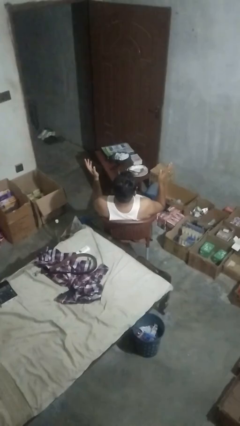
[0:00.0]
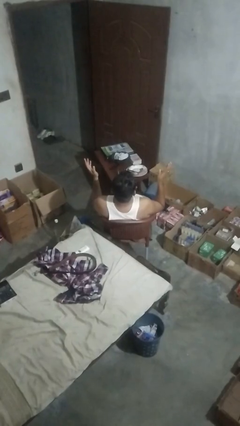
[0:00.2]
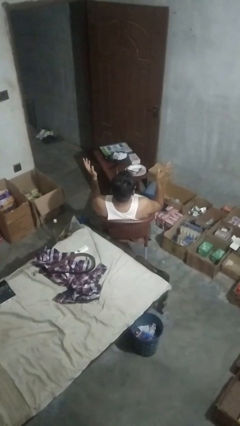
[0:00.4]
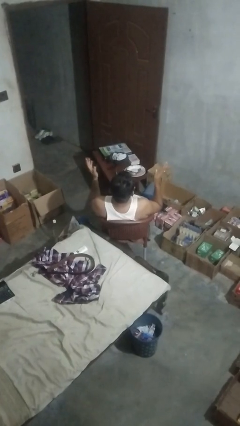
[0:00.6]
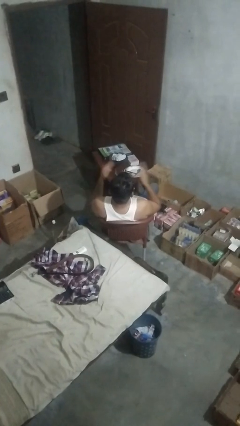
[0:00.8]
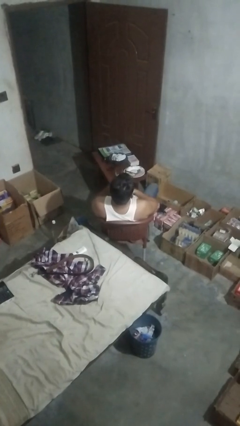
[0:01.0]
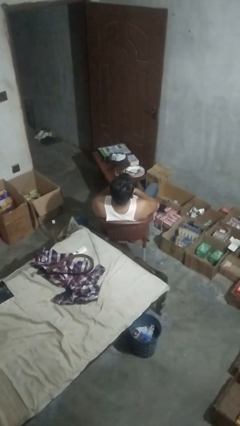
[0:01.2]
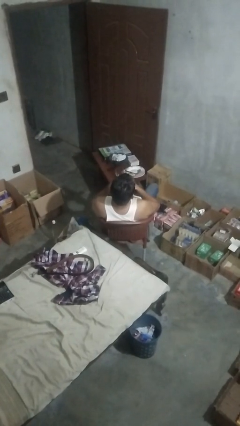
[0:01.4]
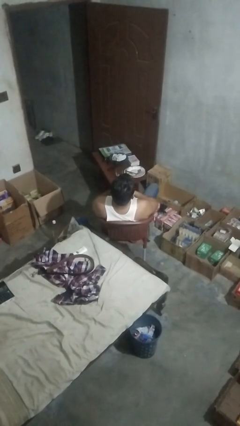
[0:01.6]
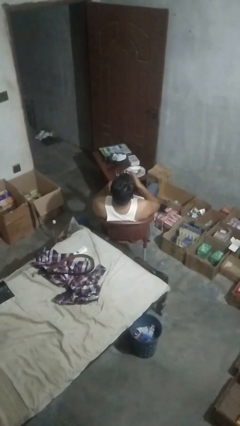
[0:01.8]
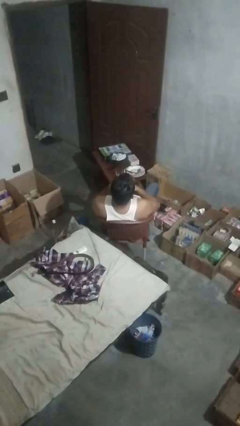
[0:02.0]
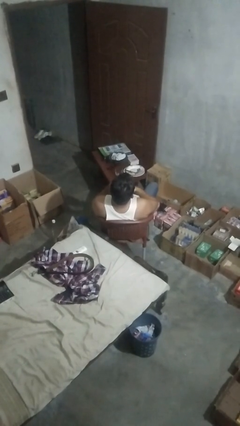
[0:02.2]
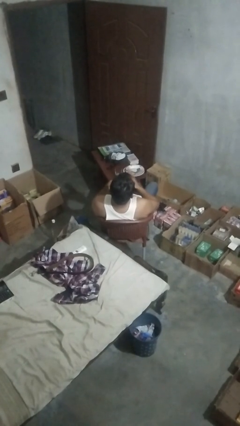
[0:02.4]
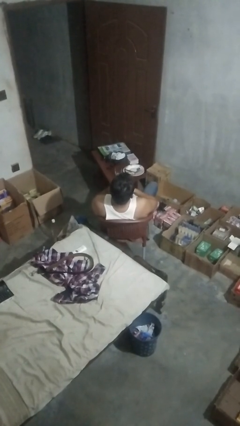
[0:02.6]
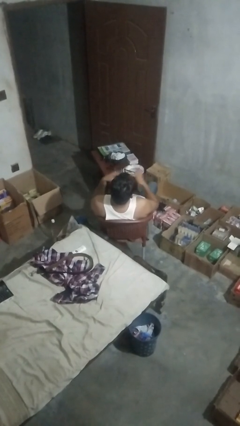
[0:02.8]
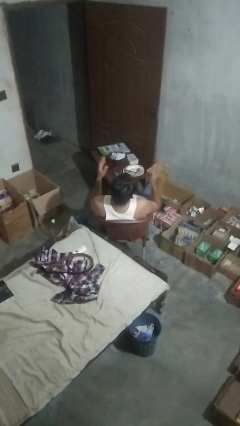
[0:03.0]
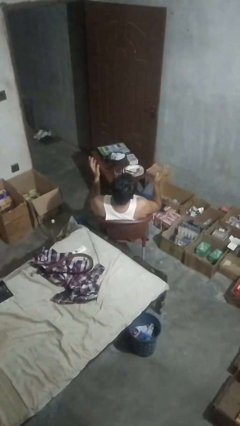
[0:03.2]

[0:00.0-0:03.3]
person drums on chest

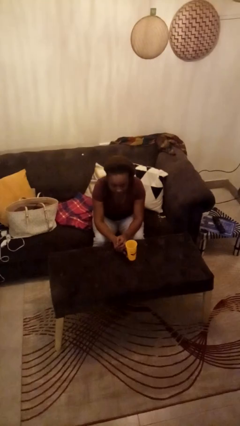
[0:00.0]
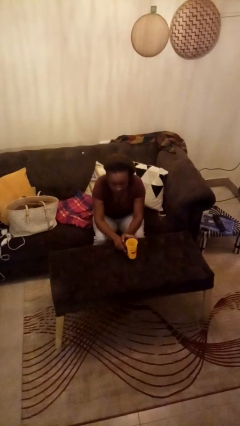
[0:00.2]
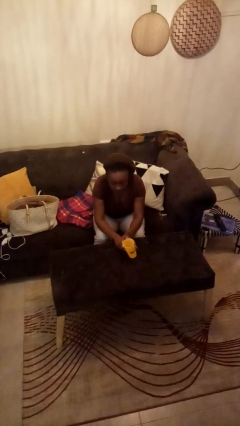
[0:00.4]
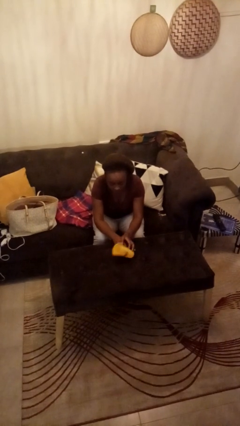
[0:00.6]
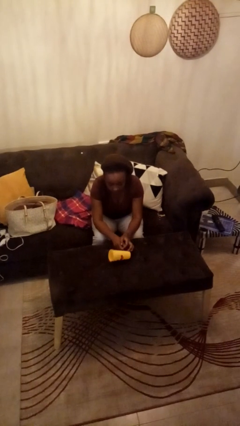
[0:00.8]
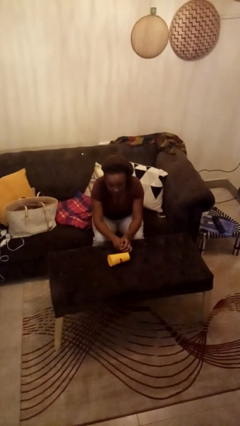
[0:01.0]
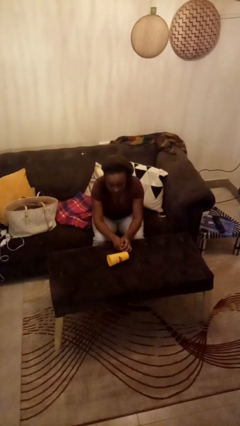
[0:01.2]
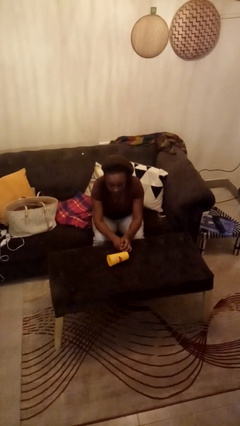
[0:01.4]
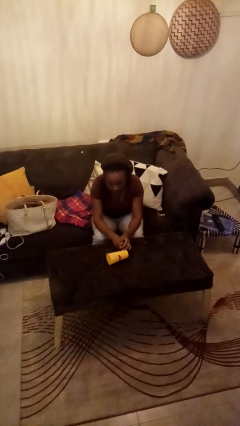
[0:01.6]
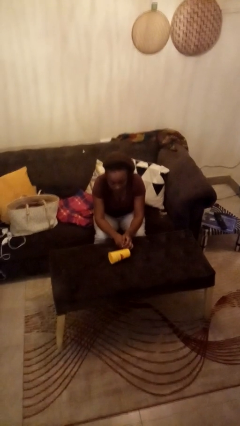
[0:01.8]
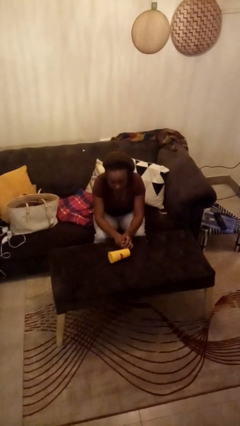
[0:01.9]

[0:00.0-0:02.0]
person knocks over glass

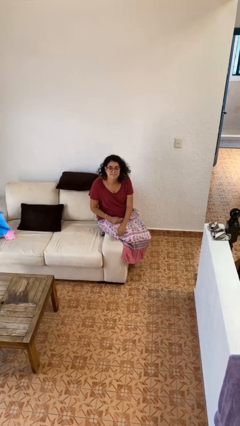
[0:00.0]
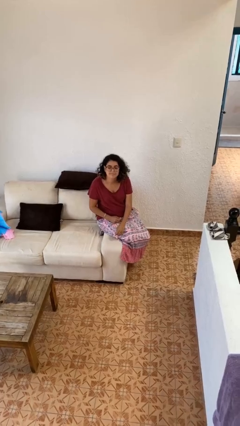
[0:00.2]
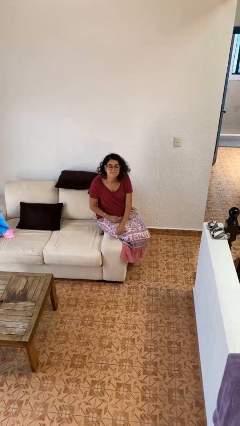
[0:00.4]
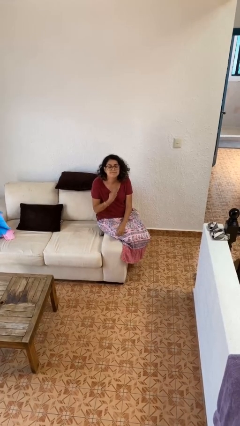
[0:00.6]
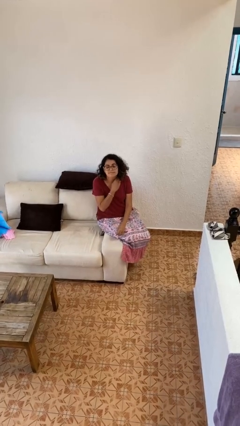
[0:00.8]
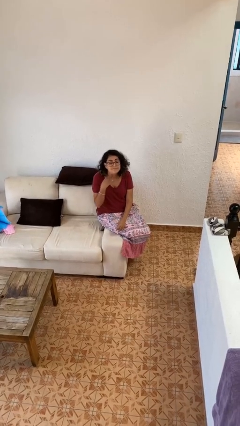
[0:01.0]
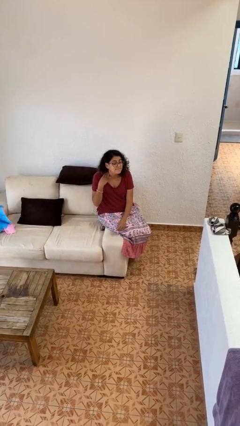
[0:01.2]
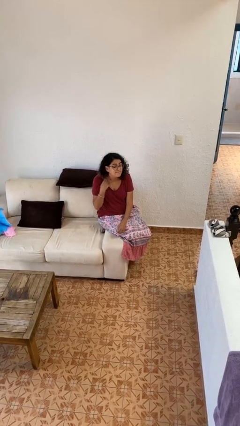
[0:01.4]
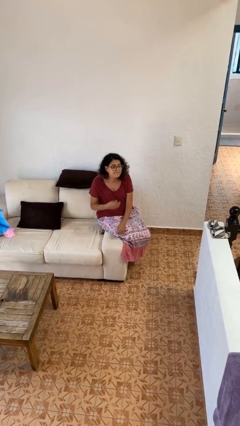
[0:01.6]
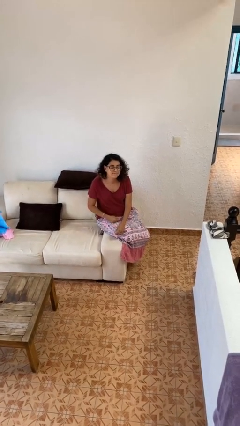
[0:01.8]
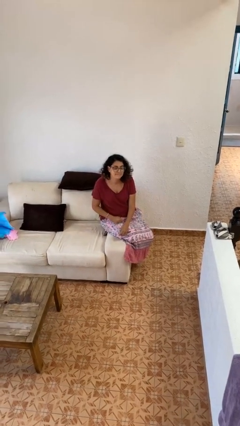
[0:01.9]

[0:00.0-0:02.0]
person gestures cut

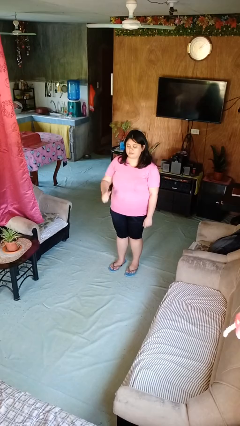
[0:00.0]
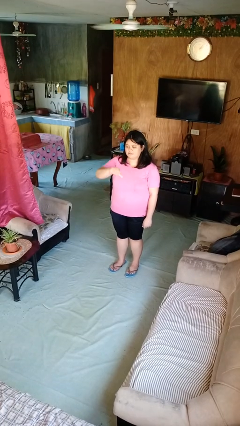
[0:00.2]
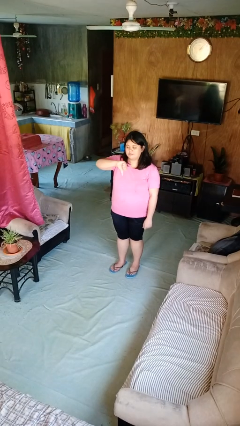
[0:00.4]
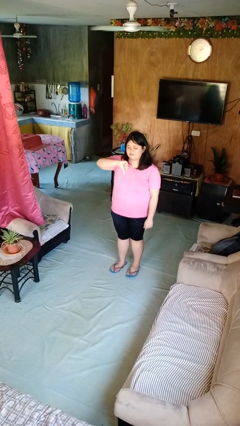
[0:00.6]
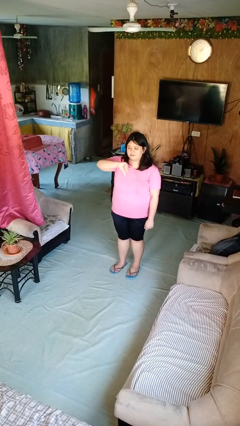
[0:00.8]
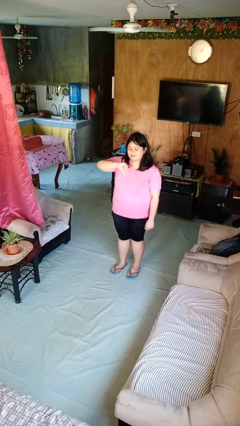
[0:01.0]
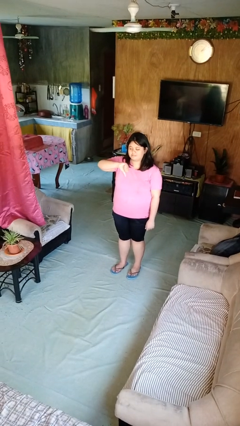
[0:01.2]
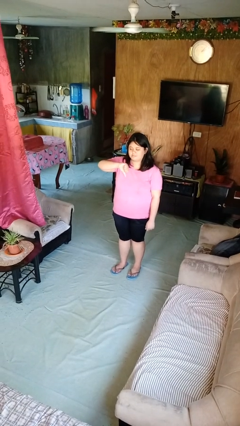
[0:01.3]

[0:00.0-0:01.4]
person gestures thumbs down

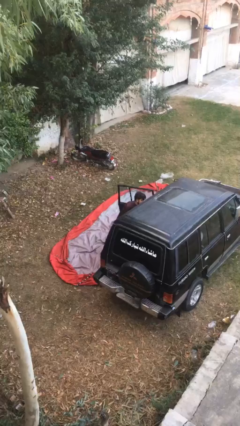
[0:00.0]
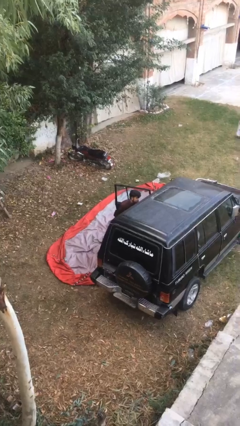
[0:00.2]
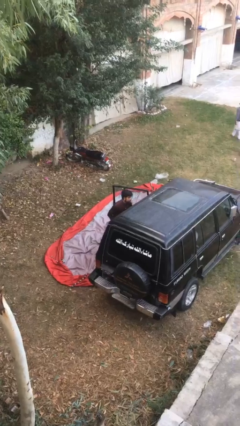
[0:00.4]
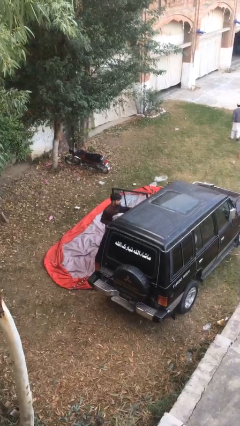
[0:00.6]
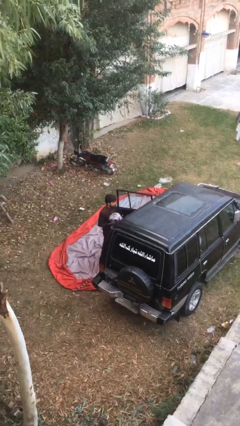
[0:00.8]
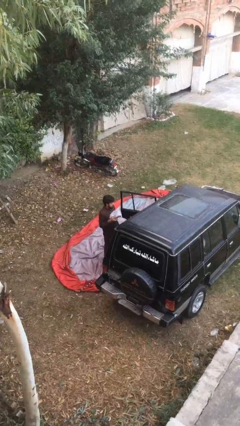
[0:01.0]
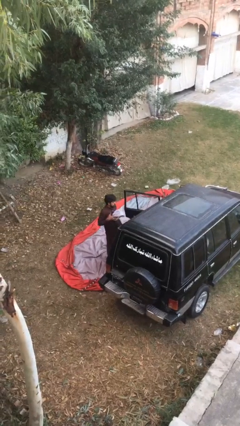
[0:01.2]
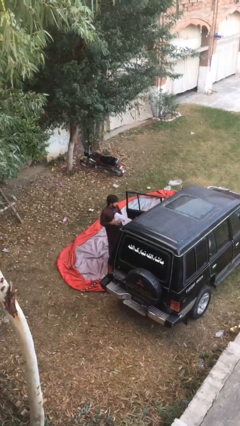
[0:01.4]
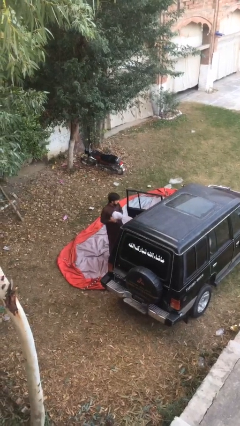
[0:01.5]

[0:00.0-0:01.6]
person unloads car

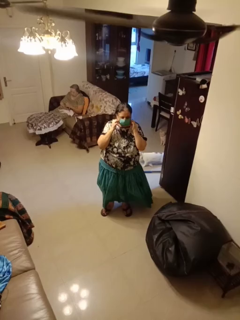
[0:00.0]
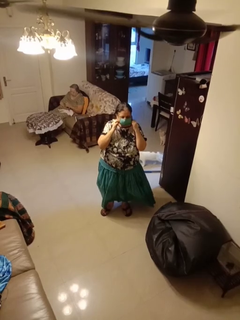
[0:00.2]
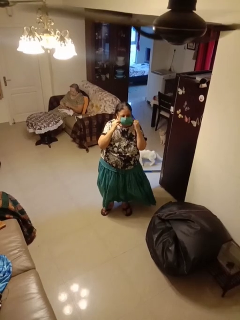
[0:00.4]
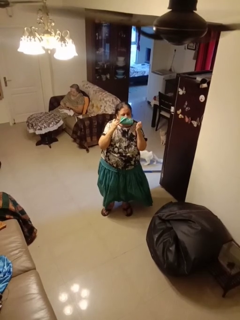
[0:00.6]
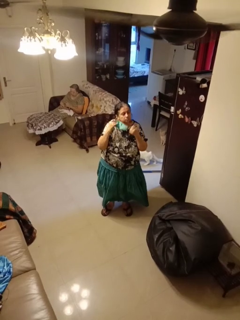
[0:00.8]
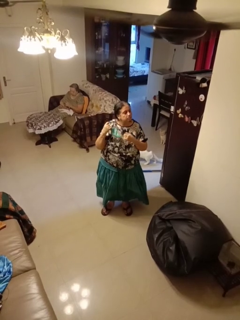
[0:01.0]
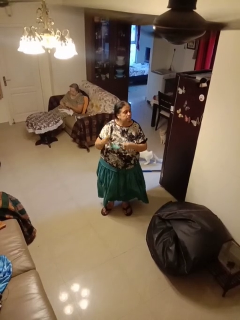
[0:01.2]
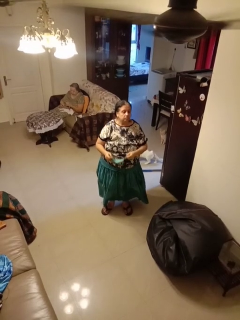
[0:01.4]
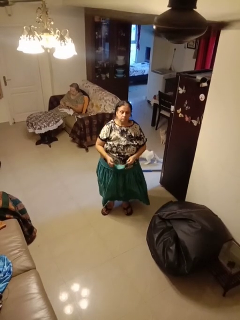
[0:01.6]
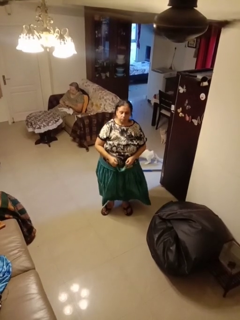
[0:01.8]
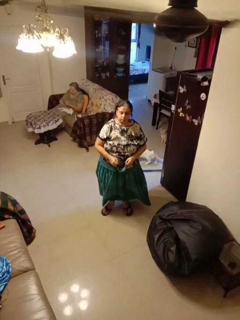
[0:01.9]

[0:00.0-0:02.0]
person takes off facemask

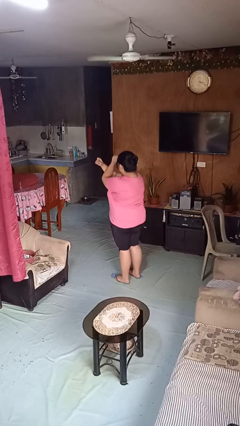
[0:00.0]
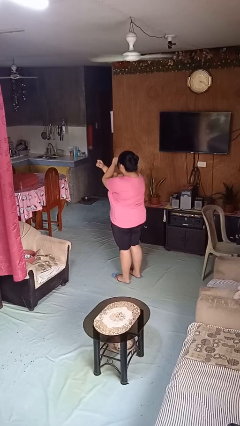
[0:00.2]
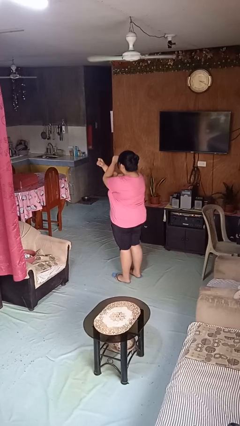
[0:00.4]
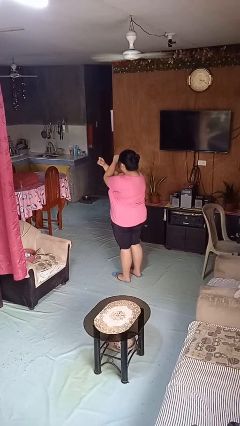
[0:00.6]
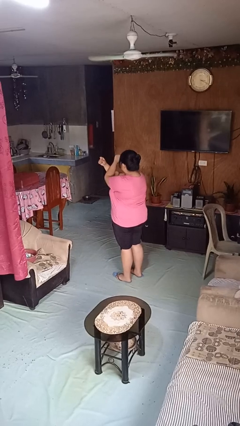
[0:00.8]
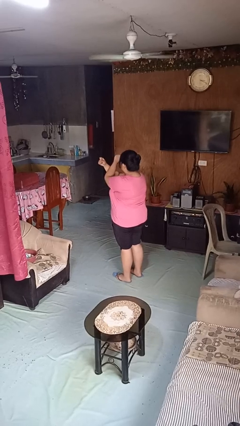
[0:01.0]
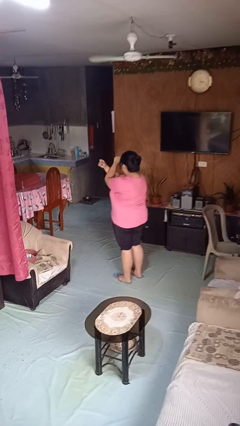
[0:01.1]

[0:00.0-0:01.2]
person gestures arms x

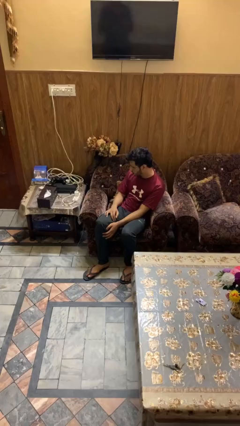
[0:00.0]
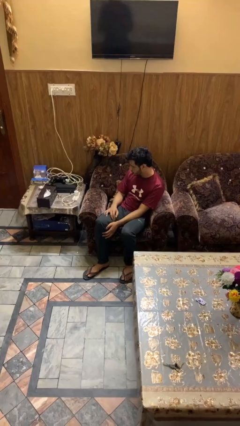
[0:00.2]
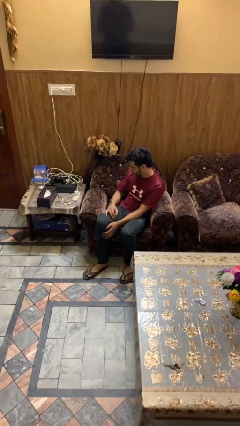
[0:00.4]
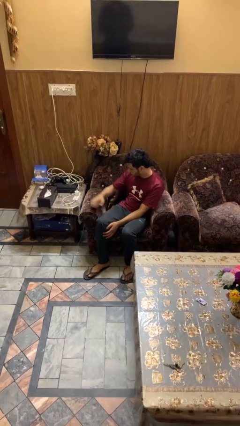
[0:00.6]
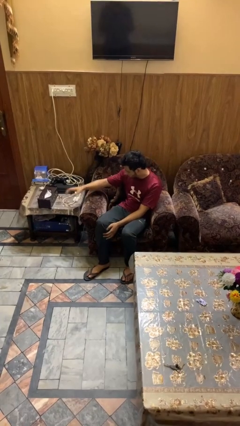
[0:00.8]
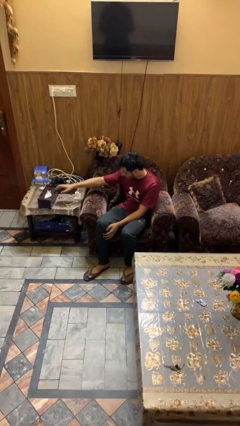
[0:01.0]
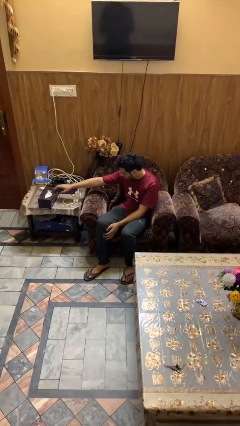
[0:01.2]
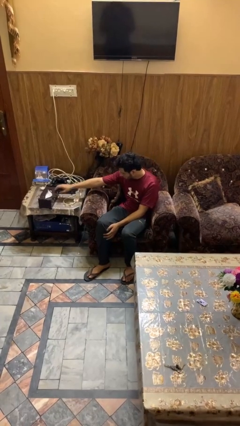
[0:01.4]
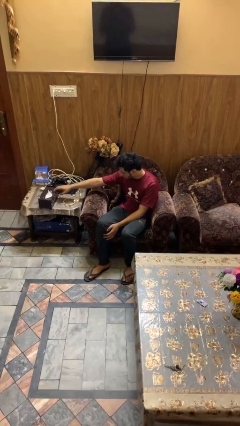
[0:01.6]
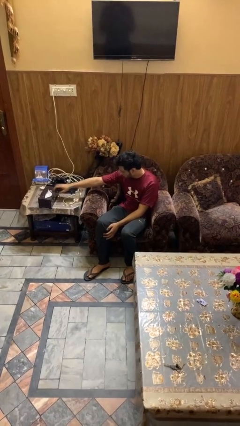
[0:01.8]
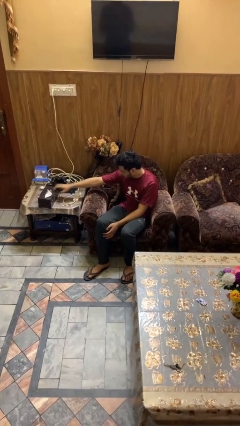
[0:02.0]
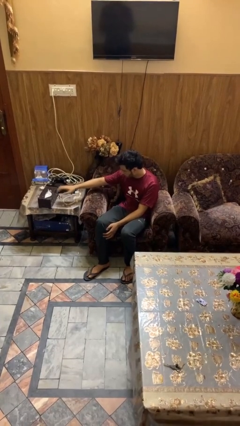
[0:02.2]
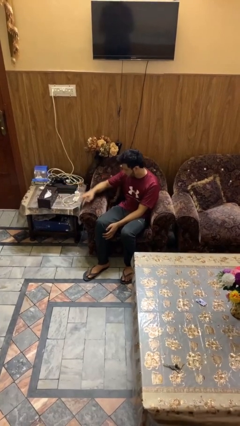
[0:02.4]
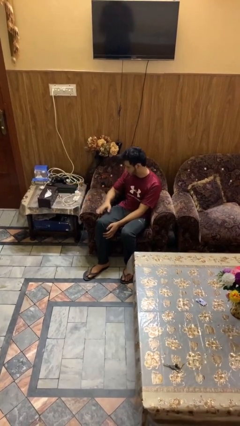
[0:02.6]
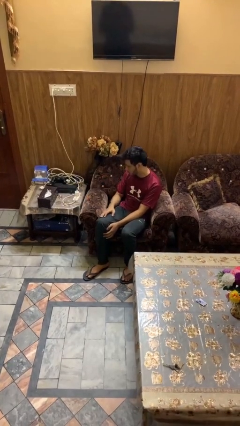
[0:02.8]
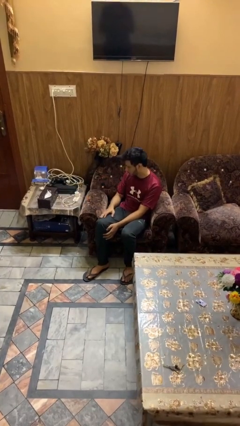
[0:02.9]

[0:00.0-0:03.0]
person waves hand over object

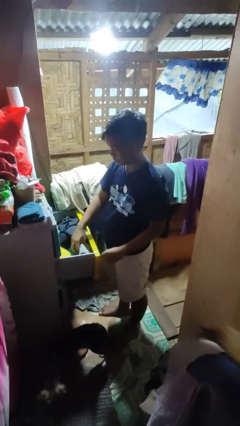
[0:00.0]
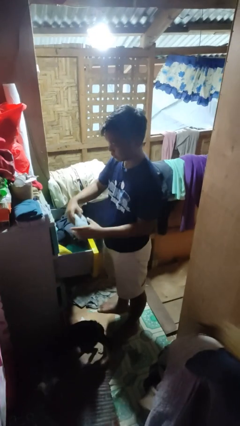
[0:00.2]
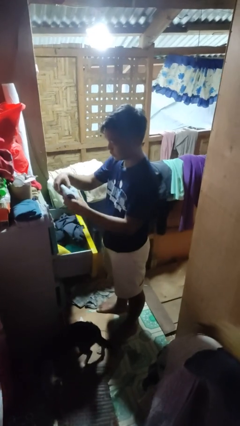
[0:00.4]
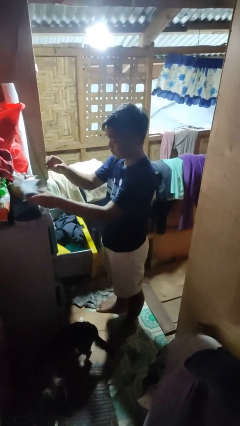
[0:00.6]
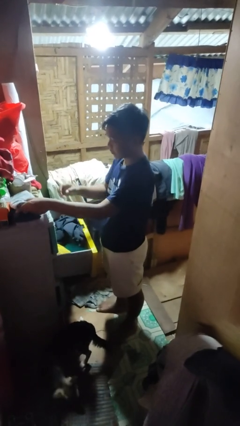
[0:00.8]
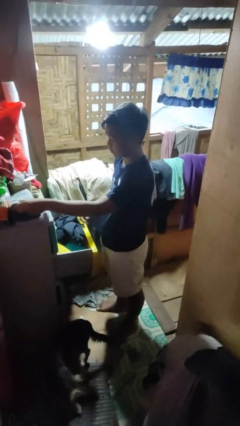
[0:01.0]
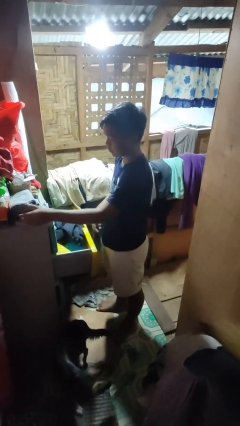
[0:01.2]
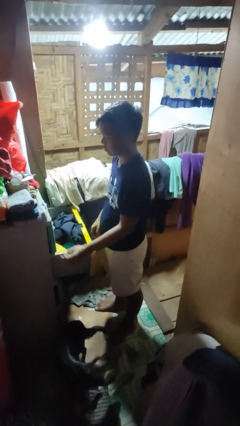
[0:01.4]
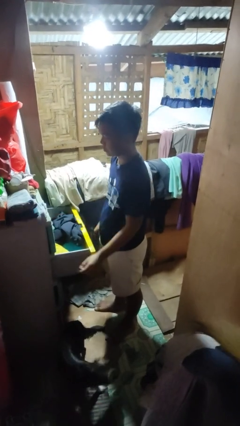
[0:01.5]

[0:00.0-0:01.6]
person takes clothes from dresser
